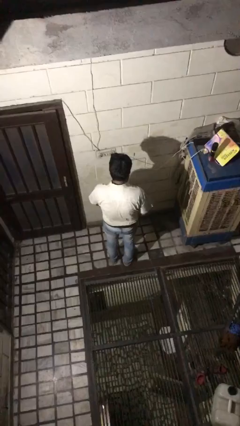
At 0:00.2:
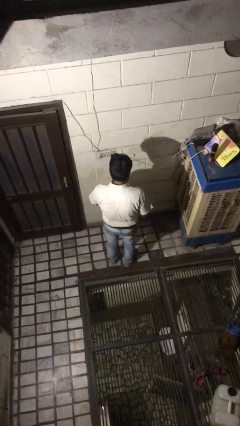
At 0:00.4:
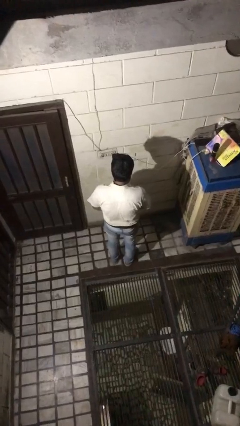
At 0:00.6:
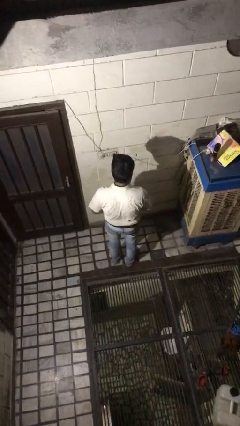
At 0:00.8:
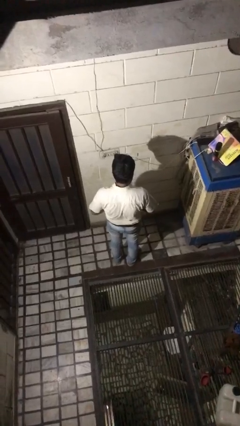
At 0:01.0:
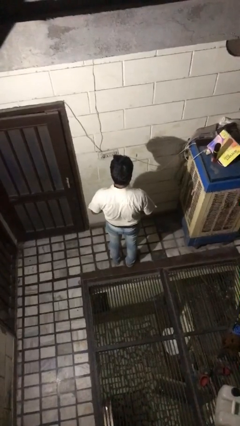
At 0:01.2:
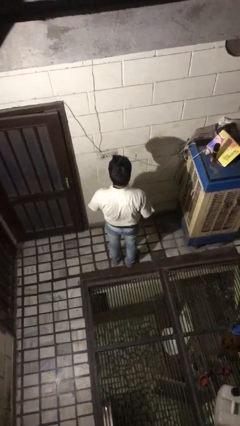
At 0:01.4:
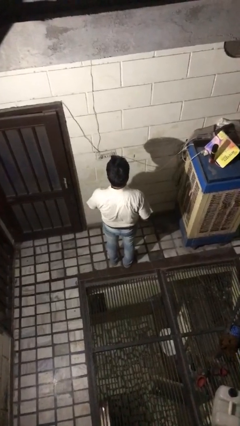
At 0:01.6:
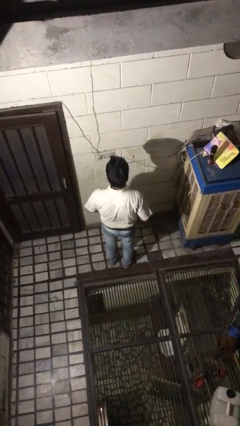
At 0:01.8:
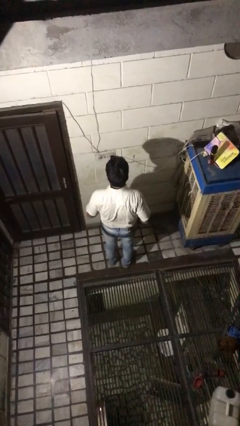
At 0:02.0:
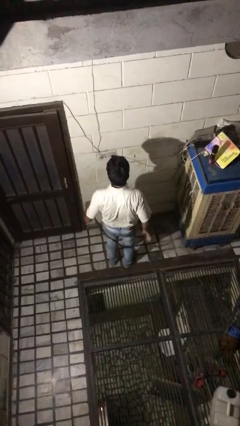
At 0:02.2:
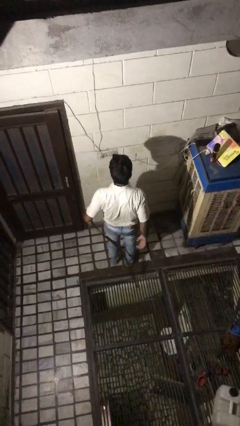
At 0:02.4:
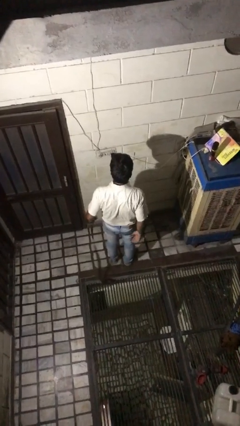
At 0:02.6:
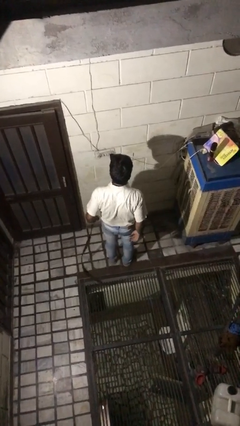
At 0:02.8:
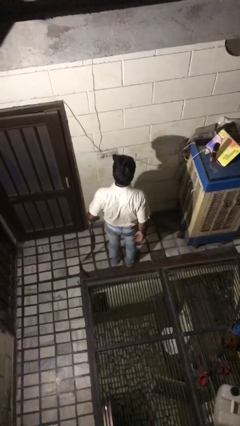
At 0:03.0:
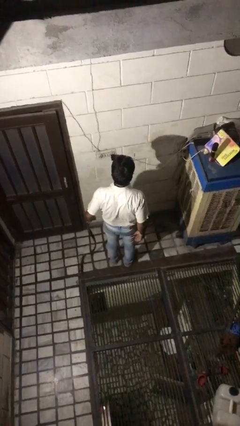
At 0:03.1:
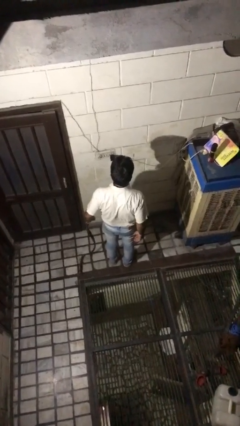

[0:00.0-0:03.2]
person takes off belt

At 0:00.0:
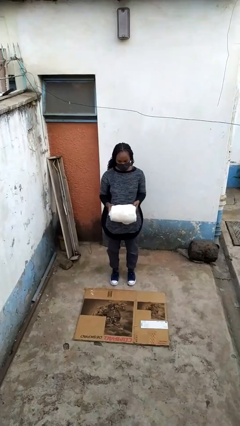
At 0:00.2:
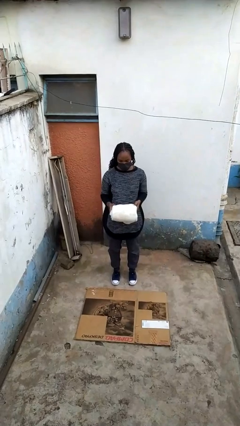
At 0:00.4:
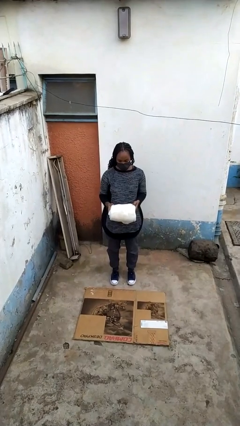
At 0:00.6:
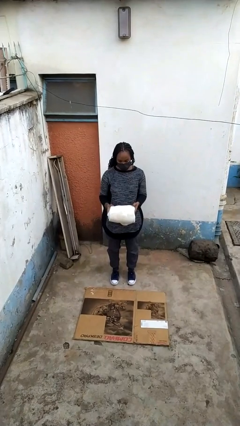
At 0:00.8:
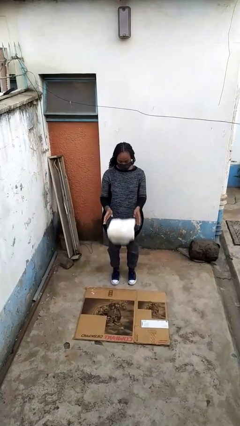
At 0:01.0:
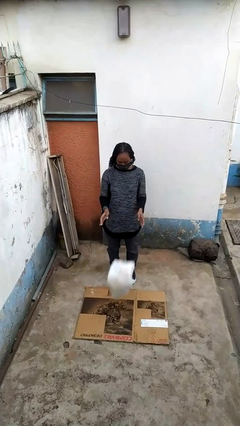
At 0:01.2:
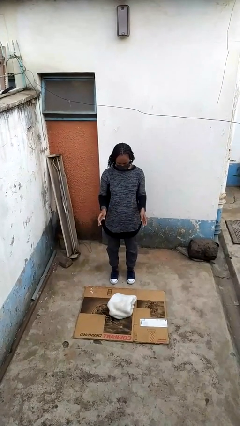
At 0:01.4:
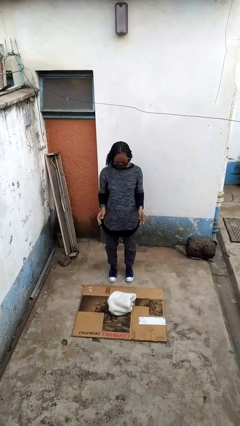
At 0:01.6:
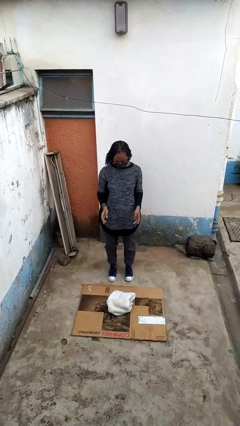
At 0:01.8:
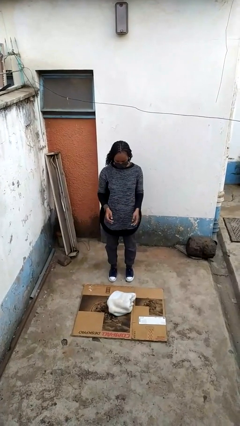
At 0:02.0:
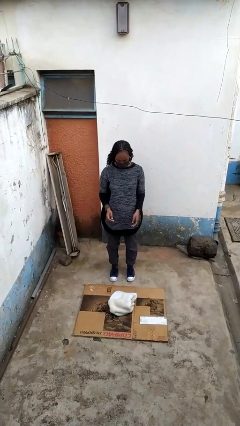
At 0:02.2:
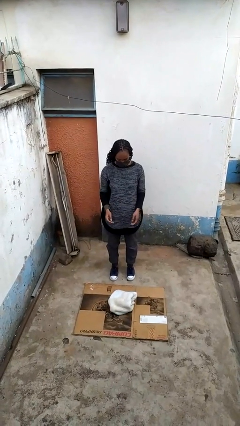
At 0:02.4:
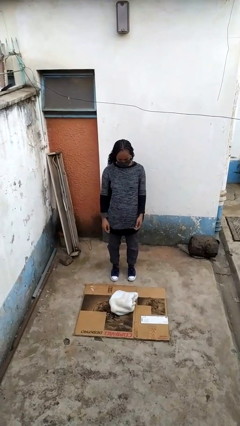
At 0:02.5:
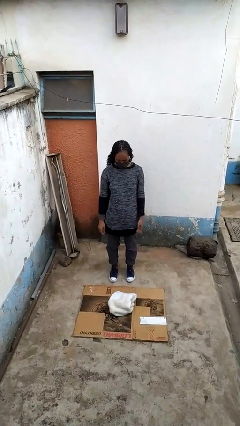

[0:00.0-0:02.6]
person drops object

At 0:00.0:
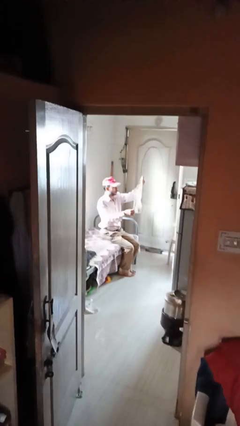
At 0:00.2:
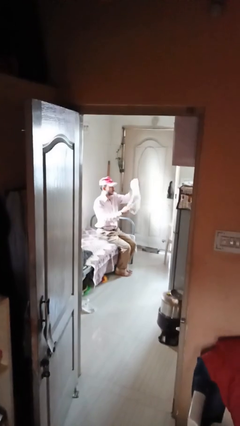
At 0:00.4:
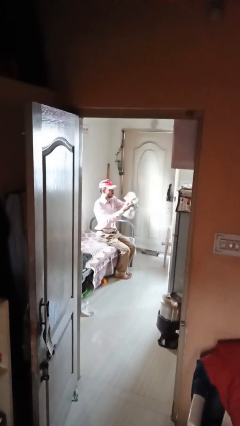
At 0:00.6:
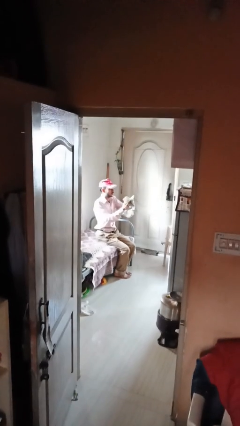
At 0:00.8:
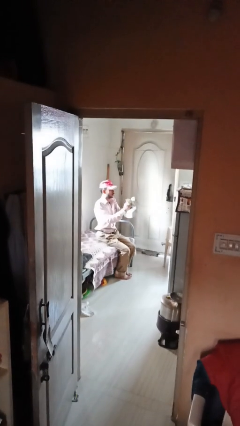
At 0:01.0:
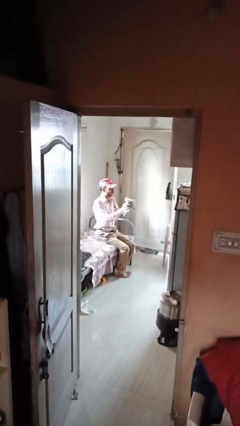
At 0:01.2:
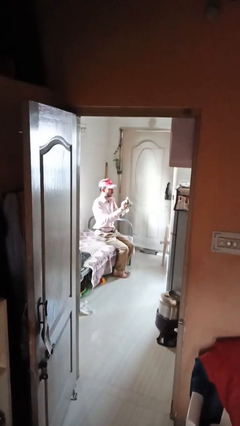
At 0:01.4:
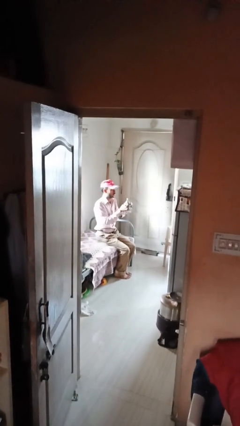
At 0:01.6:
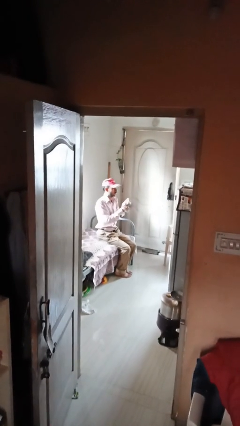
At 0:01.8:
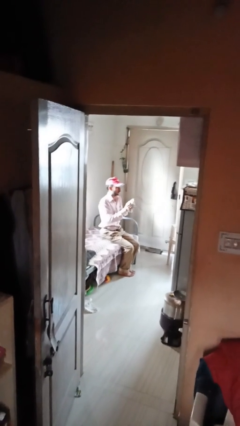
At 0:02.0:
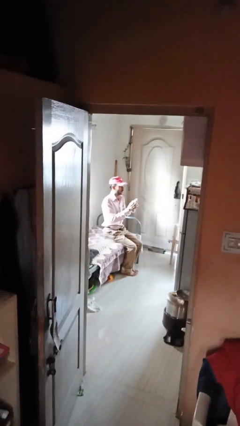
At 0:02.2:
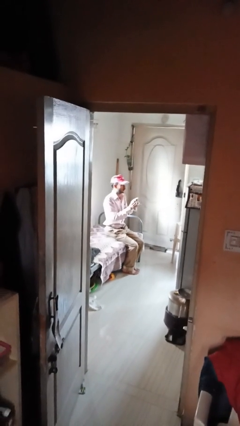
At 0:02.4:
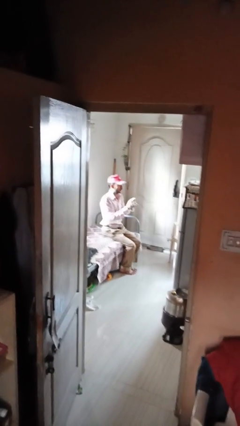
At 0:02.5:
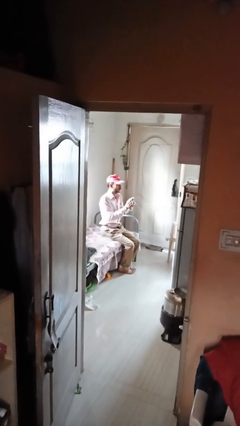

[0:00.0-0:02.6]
person crumples paper

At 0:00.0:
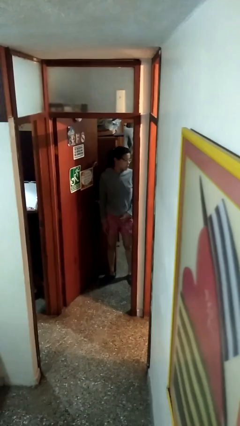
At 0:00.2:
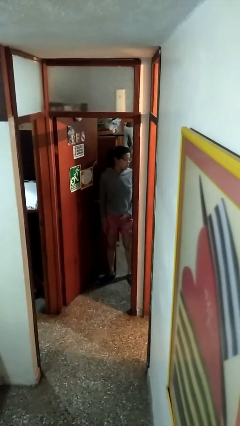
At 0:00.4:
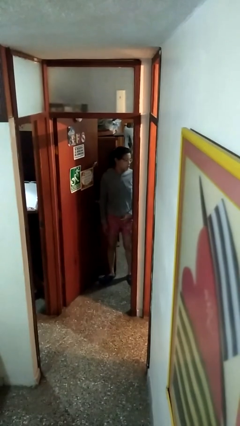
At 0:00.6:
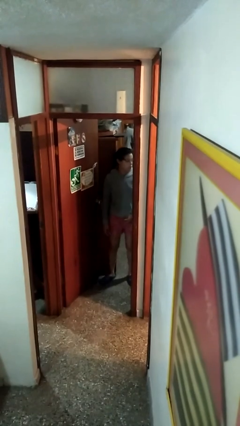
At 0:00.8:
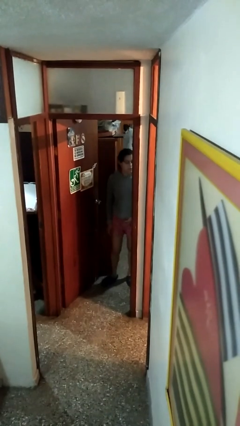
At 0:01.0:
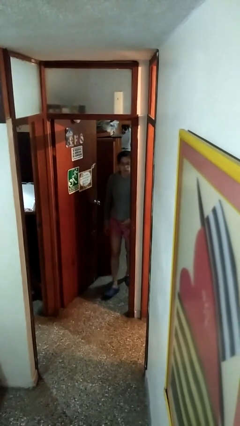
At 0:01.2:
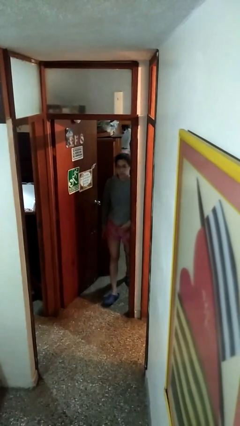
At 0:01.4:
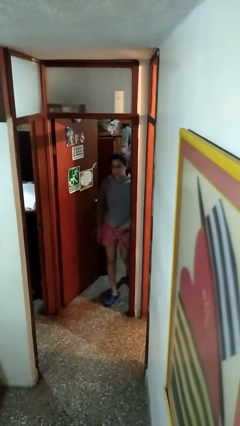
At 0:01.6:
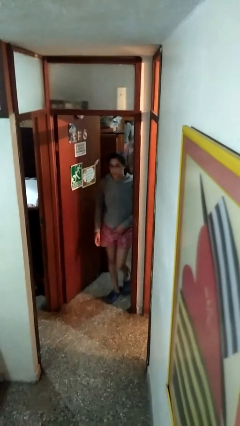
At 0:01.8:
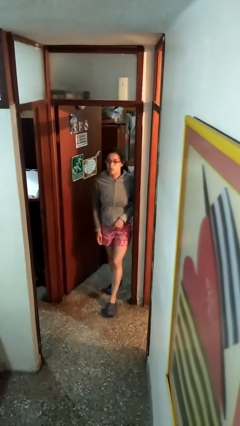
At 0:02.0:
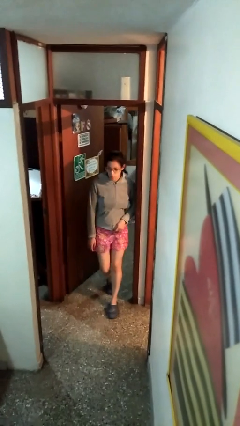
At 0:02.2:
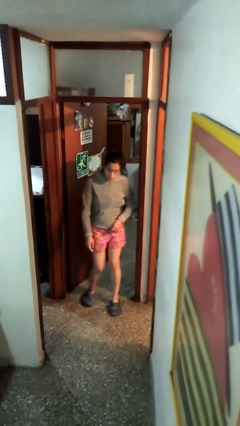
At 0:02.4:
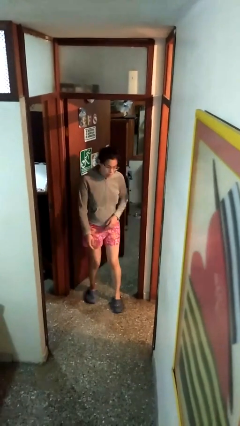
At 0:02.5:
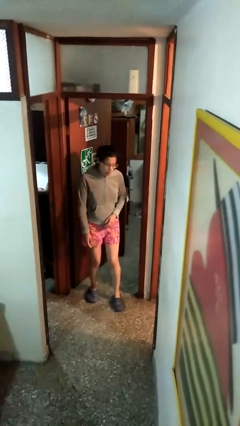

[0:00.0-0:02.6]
person bumps into wall

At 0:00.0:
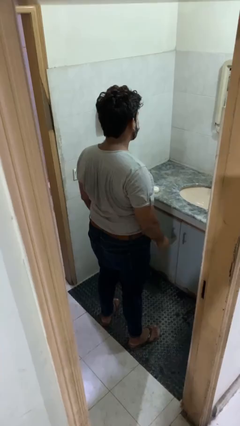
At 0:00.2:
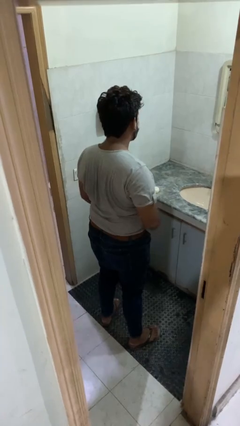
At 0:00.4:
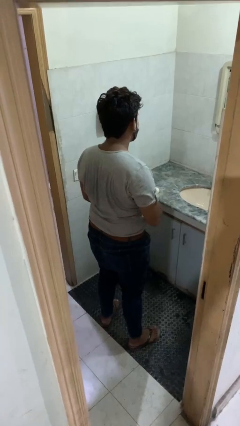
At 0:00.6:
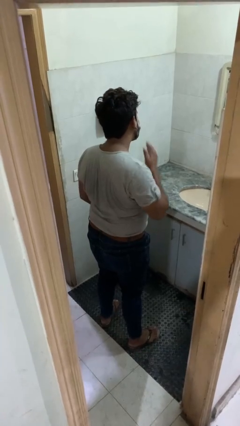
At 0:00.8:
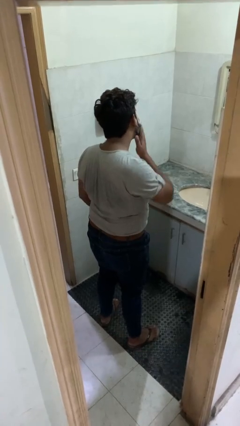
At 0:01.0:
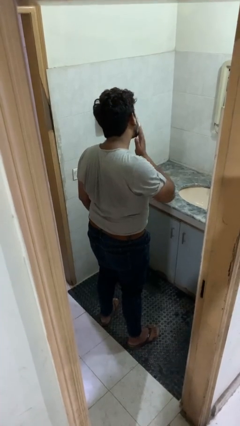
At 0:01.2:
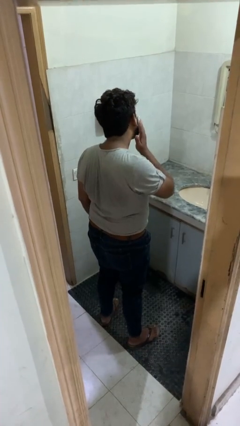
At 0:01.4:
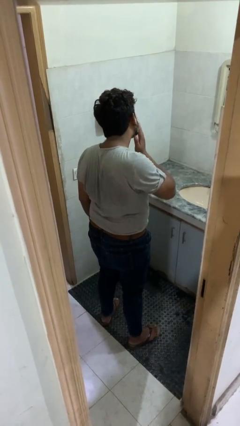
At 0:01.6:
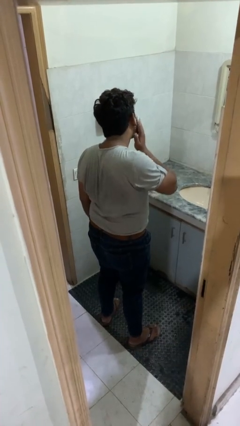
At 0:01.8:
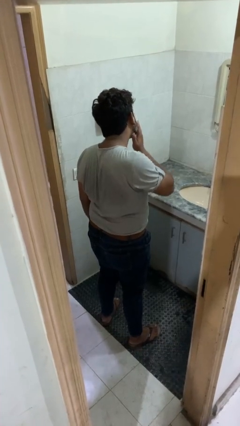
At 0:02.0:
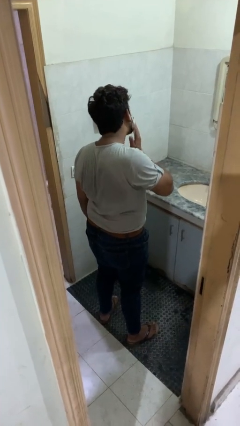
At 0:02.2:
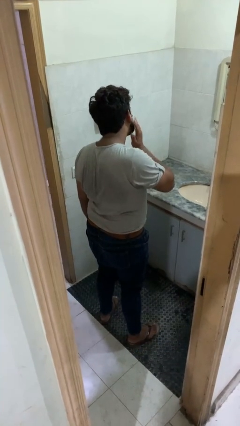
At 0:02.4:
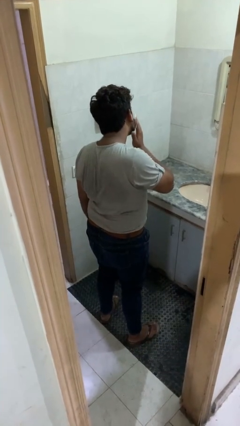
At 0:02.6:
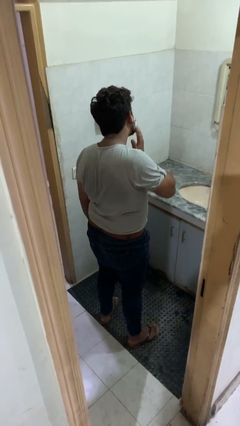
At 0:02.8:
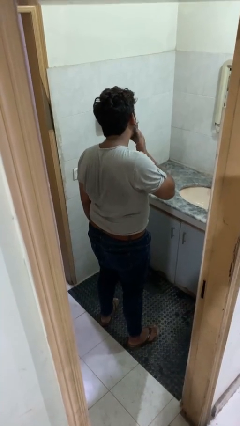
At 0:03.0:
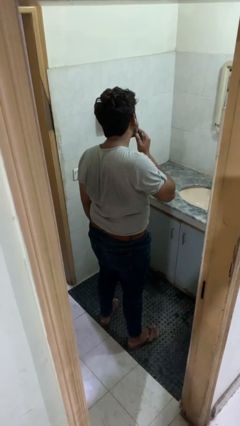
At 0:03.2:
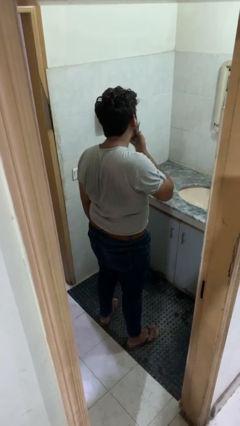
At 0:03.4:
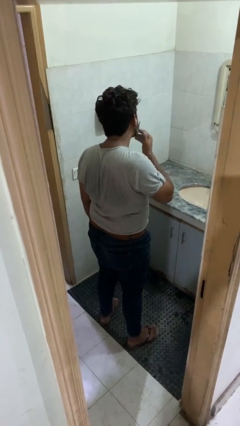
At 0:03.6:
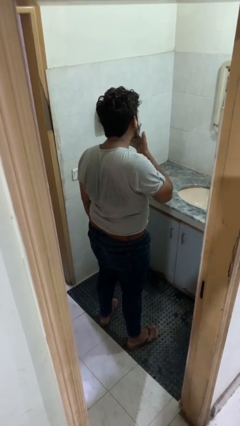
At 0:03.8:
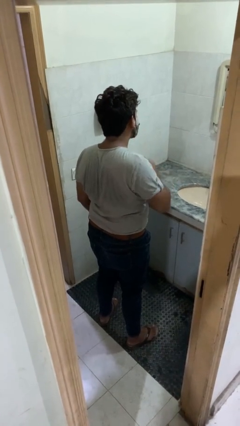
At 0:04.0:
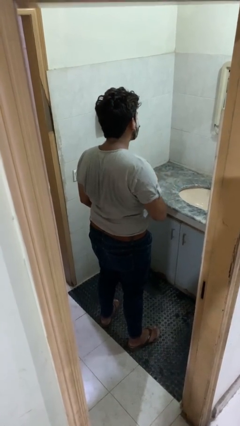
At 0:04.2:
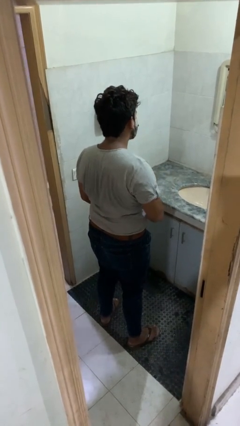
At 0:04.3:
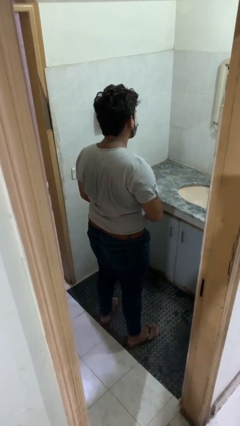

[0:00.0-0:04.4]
person applies shaving cream

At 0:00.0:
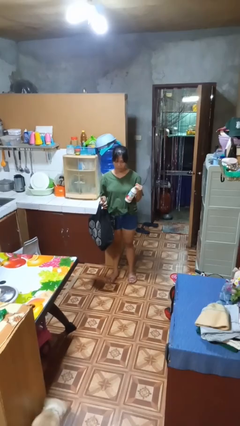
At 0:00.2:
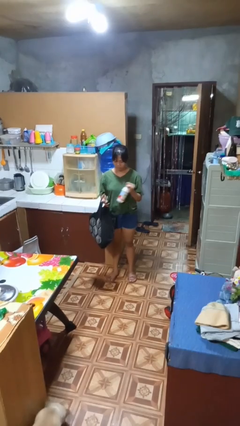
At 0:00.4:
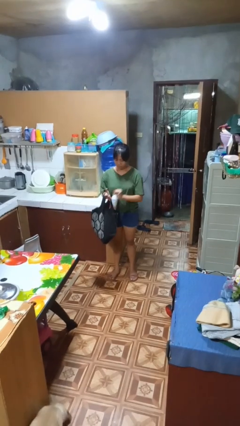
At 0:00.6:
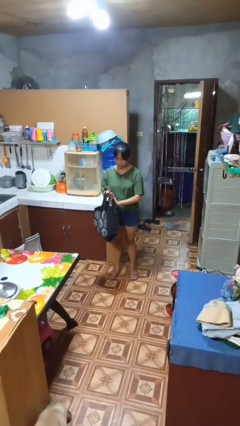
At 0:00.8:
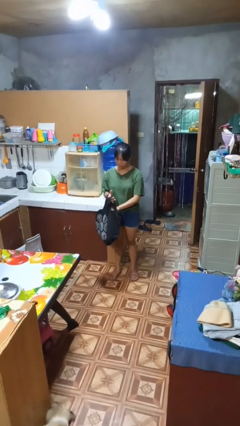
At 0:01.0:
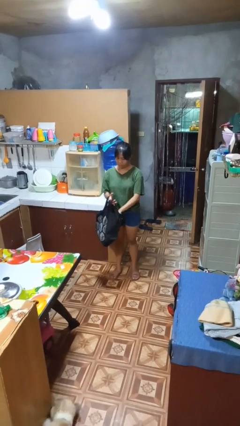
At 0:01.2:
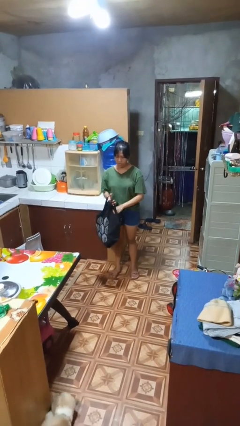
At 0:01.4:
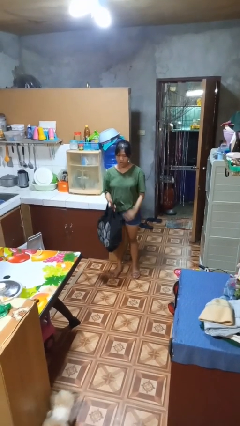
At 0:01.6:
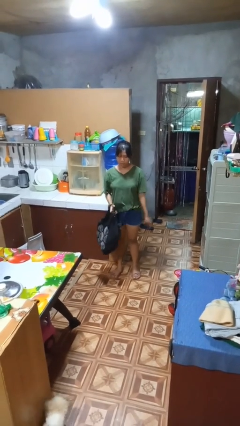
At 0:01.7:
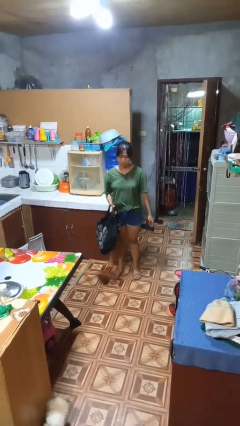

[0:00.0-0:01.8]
person puts object into bag
